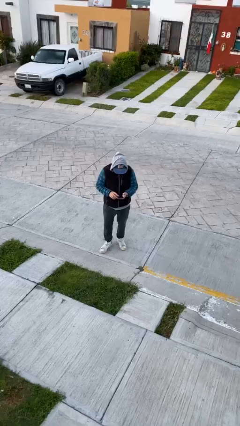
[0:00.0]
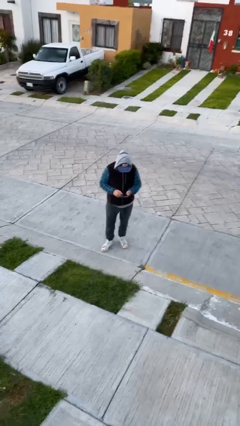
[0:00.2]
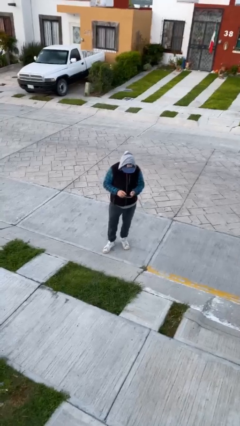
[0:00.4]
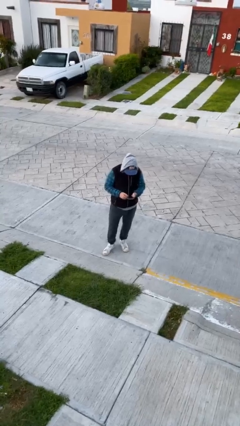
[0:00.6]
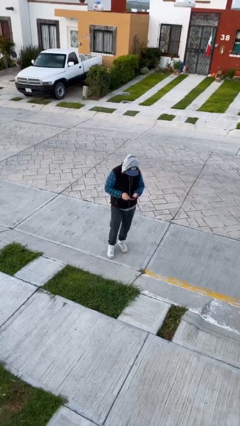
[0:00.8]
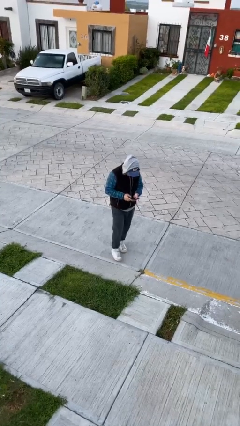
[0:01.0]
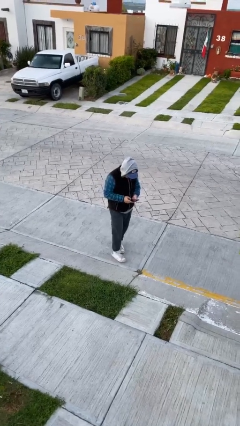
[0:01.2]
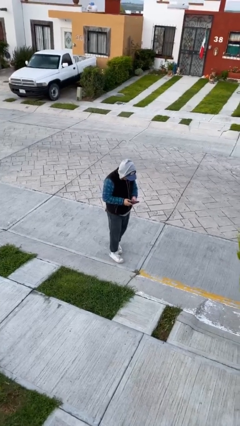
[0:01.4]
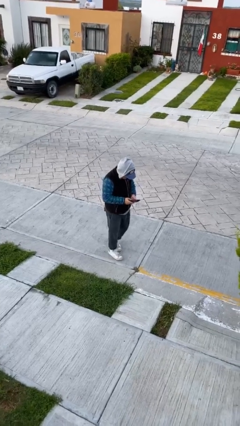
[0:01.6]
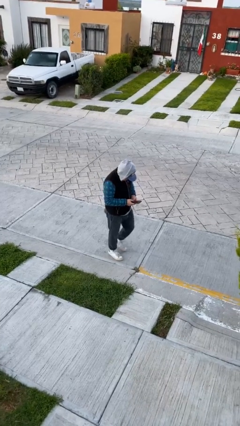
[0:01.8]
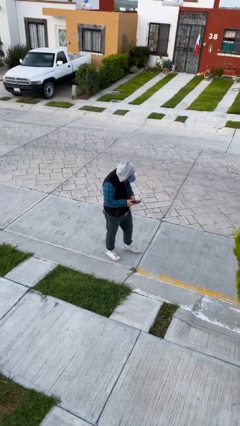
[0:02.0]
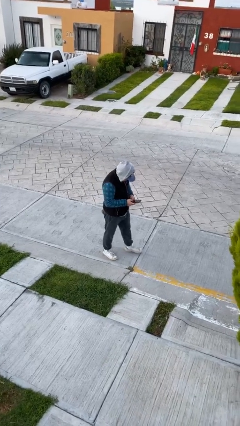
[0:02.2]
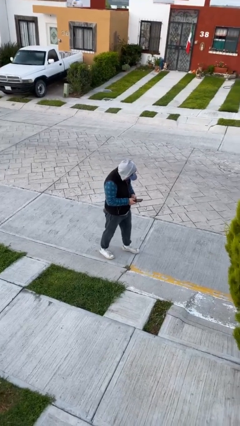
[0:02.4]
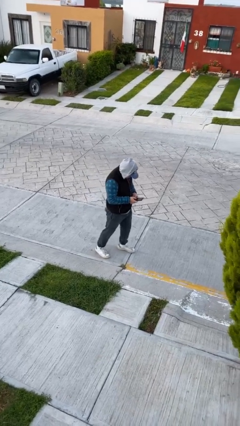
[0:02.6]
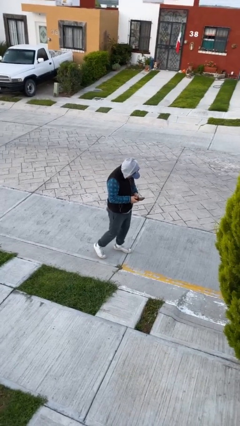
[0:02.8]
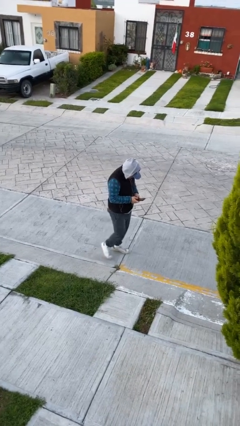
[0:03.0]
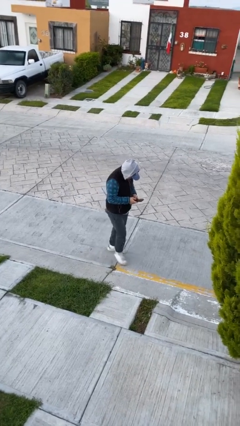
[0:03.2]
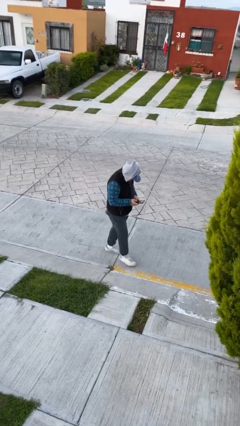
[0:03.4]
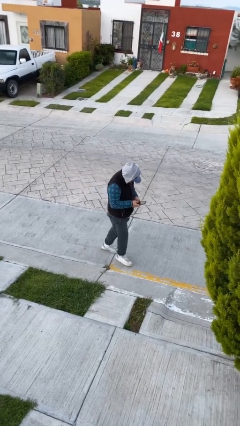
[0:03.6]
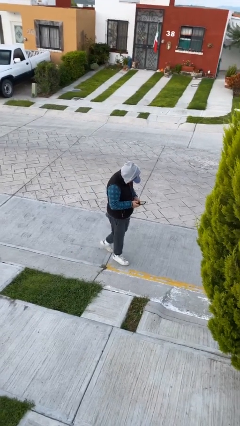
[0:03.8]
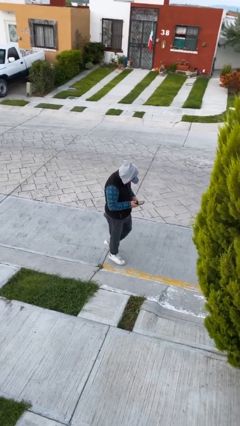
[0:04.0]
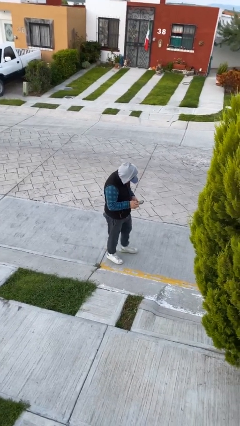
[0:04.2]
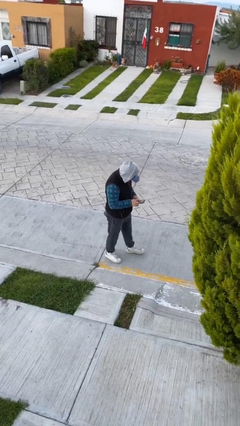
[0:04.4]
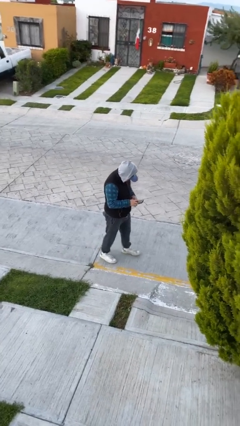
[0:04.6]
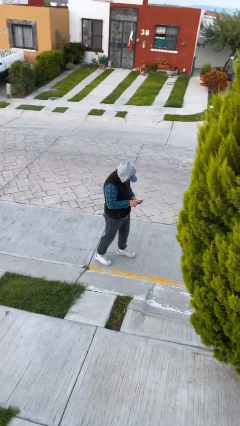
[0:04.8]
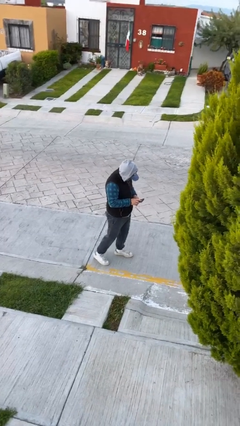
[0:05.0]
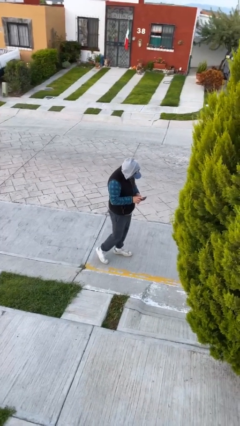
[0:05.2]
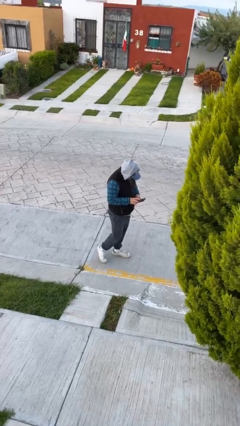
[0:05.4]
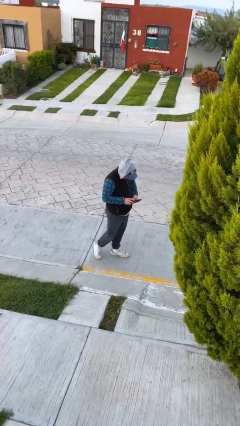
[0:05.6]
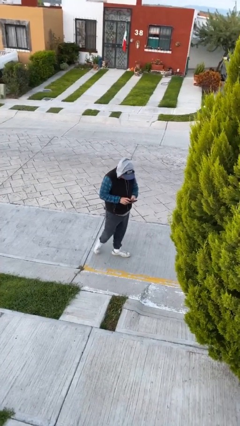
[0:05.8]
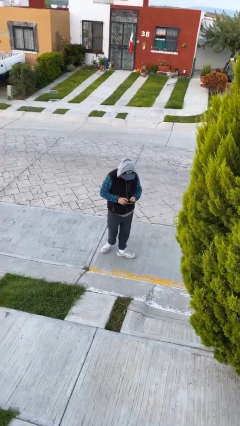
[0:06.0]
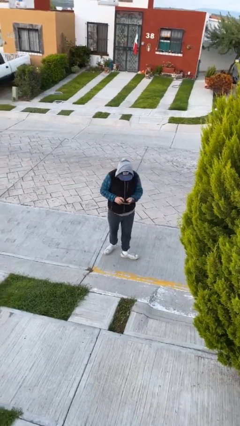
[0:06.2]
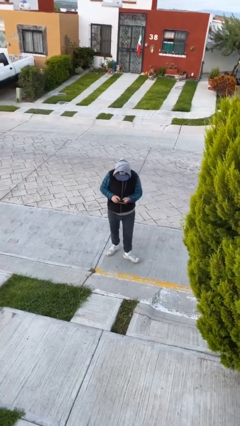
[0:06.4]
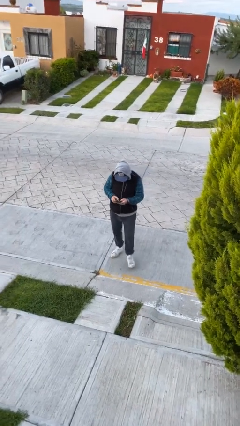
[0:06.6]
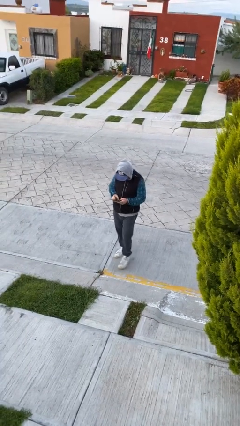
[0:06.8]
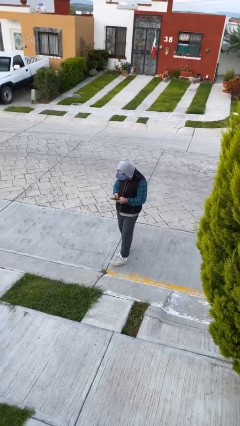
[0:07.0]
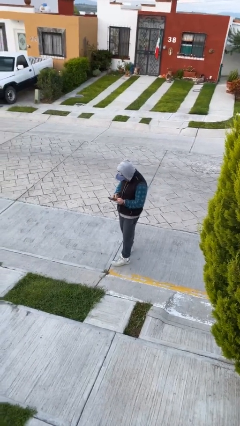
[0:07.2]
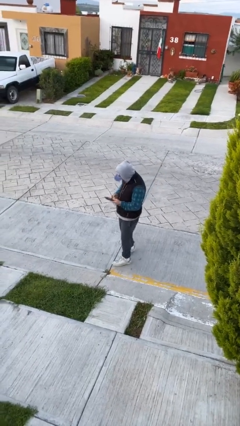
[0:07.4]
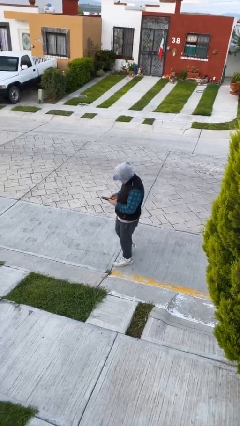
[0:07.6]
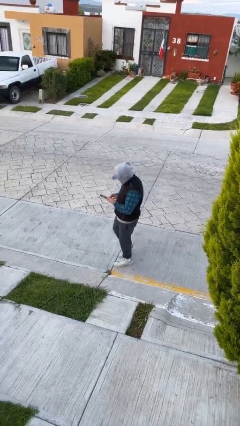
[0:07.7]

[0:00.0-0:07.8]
person texts on phone

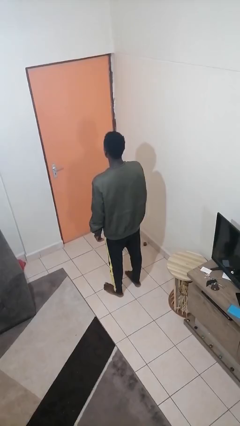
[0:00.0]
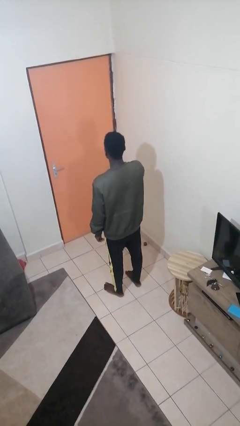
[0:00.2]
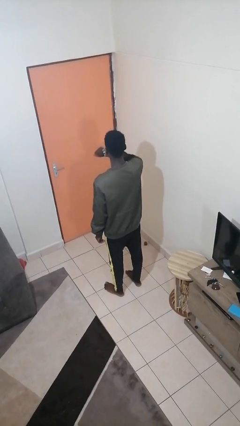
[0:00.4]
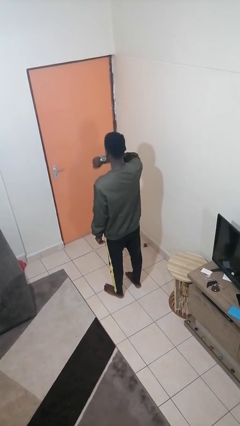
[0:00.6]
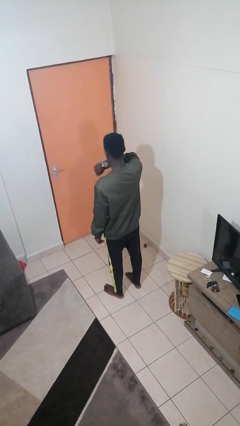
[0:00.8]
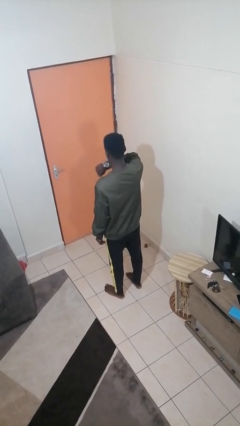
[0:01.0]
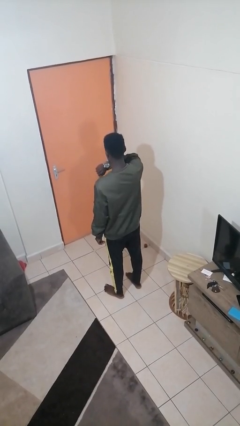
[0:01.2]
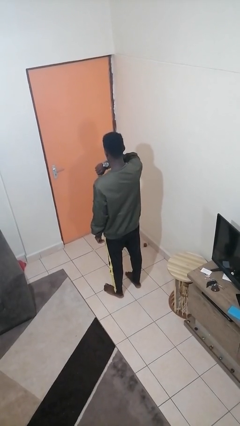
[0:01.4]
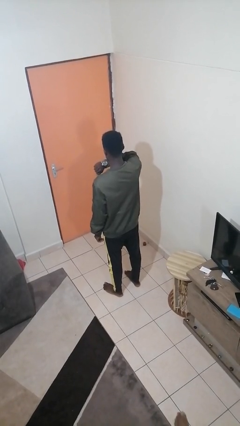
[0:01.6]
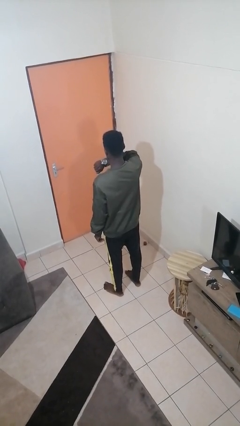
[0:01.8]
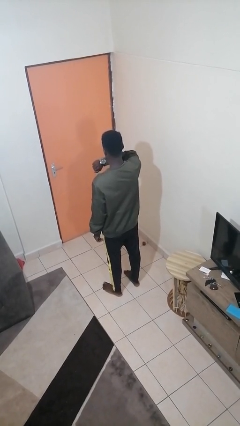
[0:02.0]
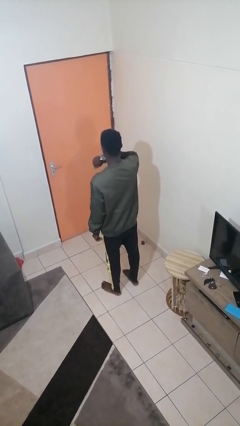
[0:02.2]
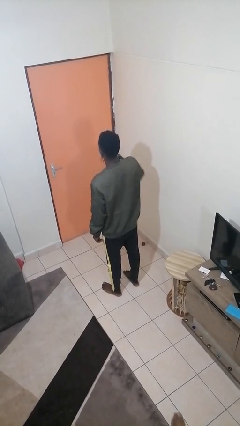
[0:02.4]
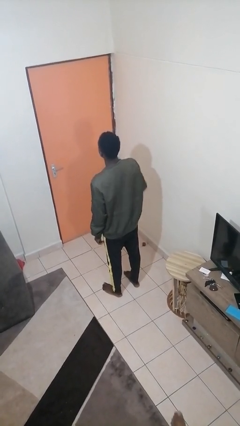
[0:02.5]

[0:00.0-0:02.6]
person looks at wristwatch

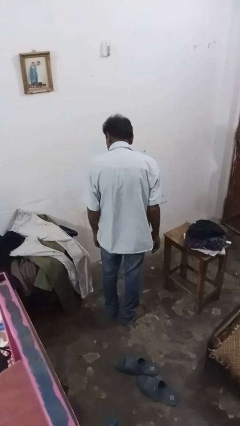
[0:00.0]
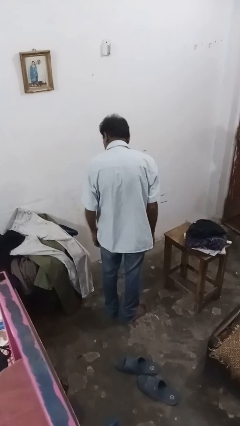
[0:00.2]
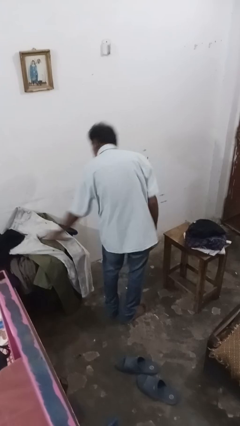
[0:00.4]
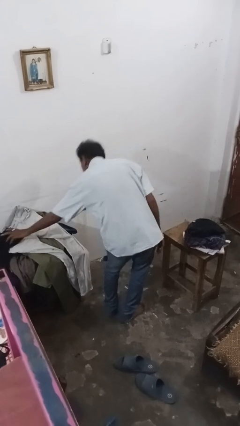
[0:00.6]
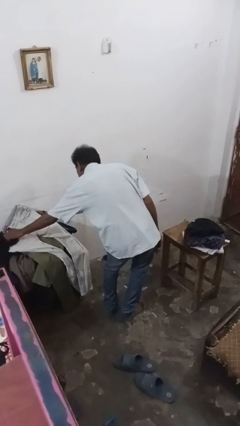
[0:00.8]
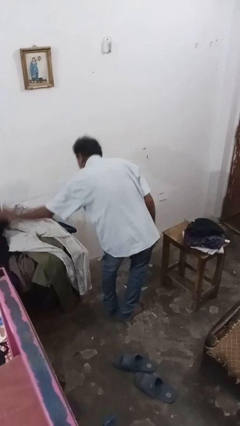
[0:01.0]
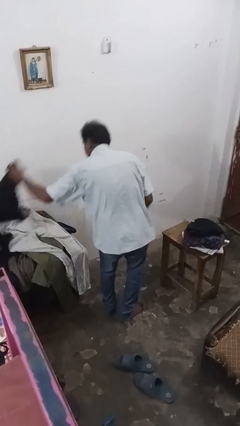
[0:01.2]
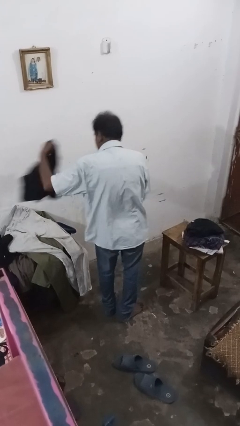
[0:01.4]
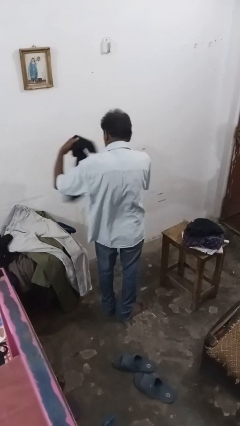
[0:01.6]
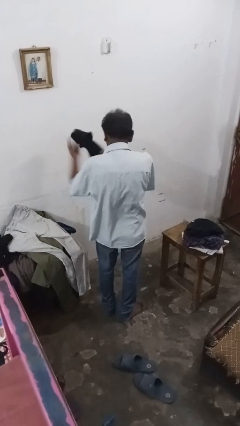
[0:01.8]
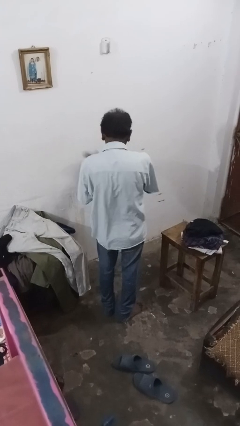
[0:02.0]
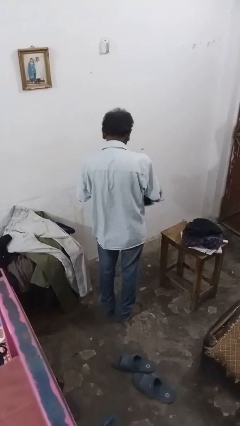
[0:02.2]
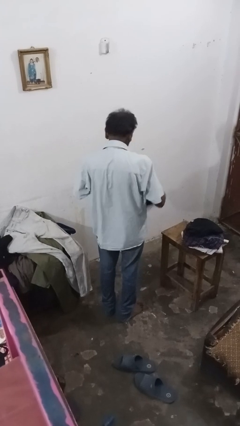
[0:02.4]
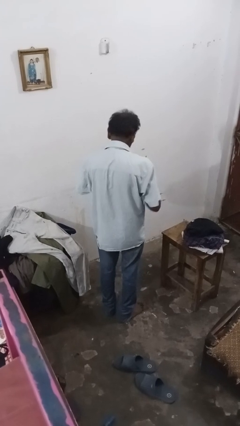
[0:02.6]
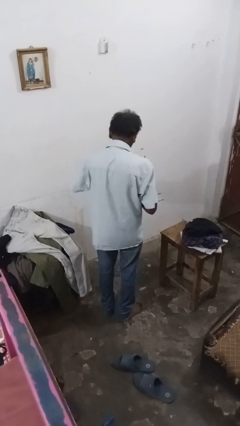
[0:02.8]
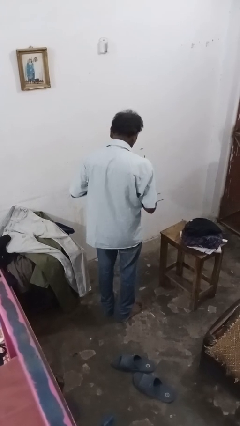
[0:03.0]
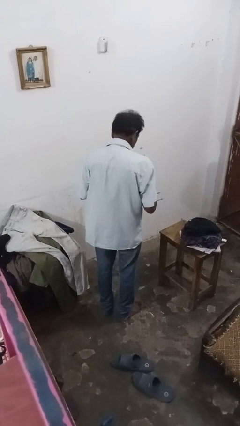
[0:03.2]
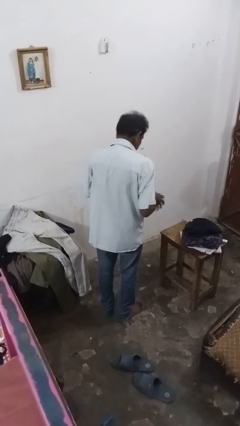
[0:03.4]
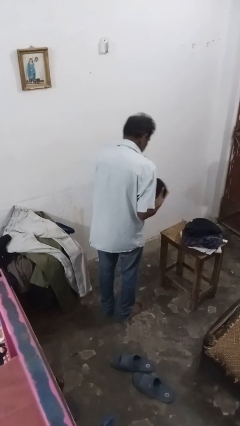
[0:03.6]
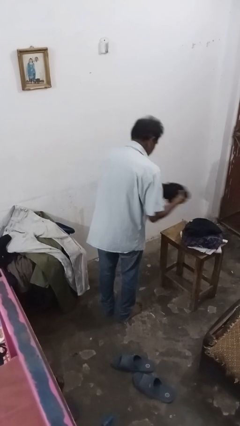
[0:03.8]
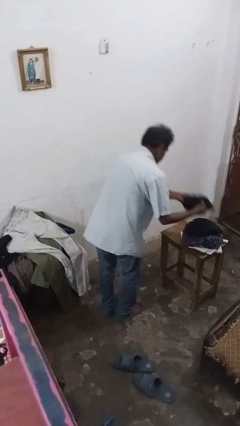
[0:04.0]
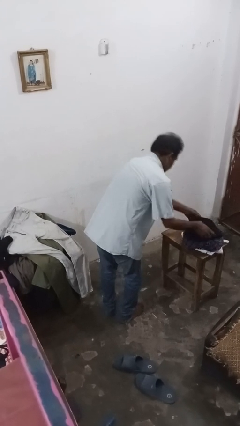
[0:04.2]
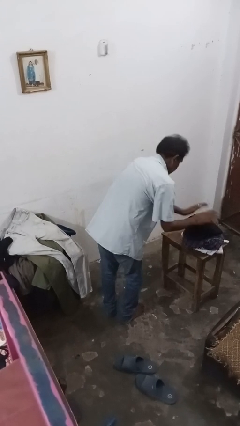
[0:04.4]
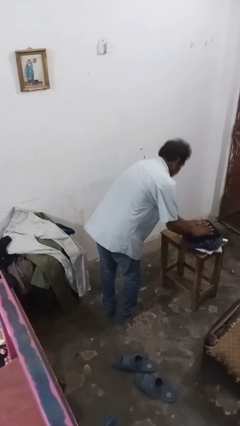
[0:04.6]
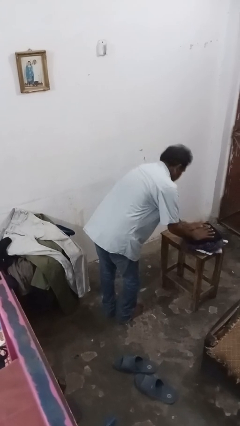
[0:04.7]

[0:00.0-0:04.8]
person folds shirt

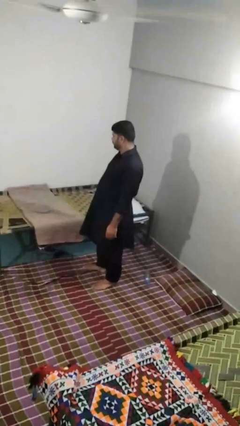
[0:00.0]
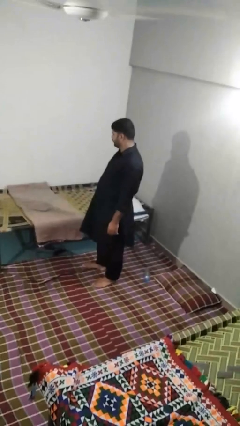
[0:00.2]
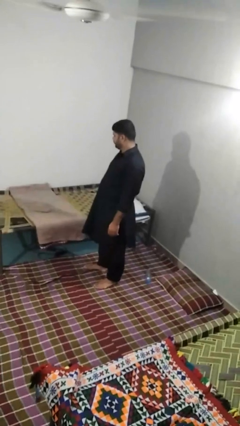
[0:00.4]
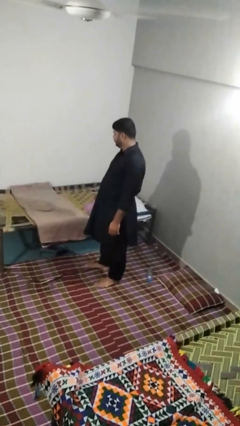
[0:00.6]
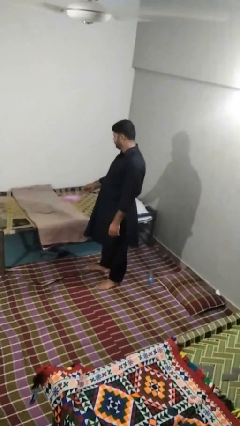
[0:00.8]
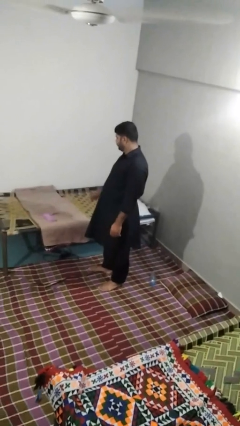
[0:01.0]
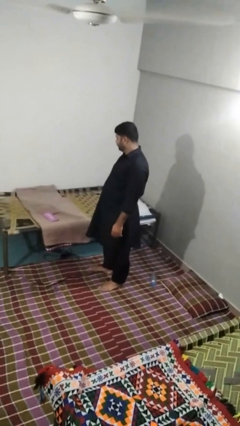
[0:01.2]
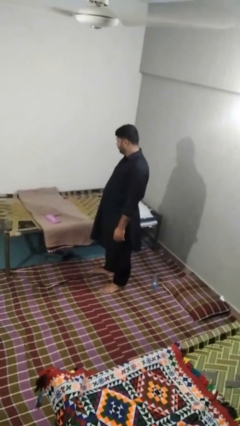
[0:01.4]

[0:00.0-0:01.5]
person puts down object on bed

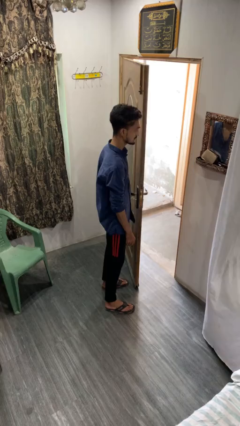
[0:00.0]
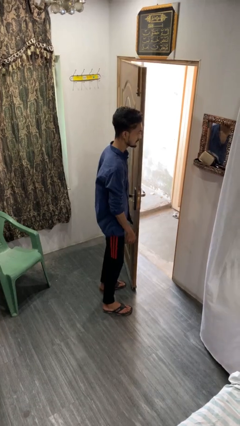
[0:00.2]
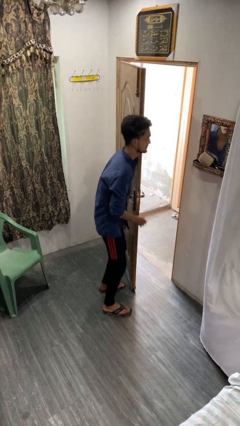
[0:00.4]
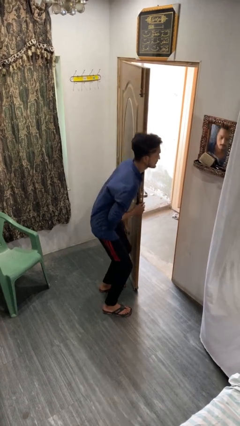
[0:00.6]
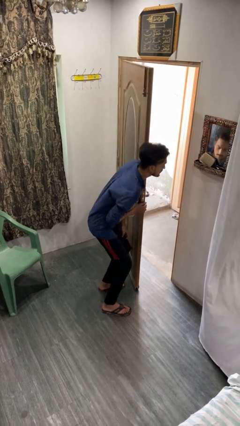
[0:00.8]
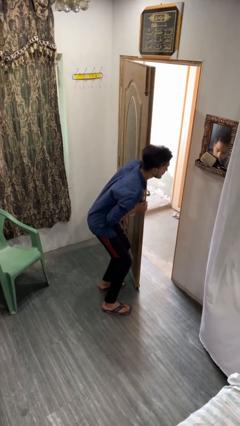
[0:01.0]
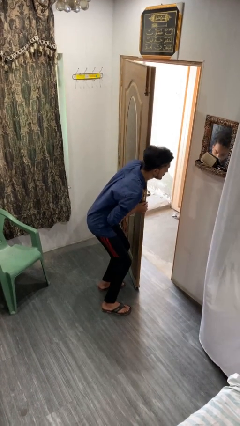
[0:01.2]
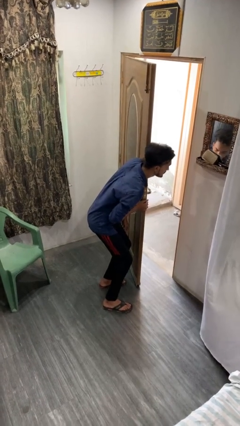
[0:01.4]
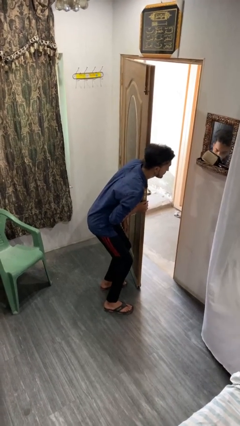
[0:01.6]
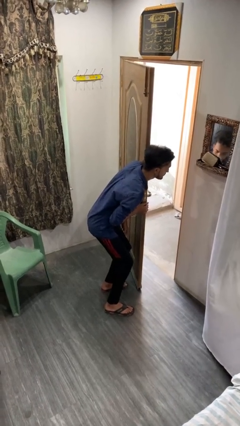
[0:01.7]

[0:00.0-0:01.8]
person bumps into wall
